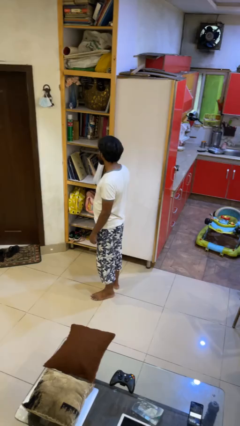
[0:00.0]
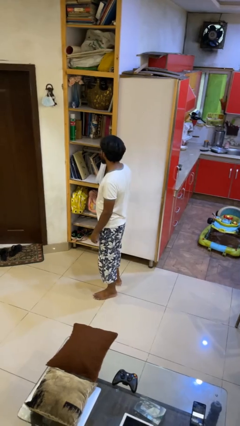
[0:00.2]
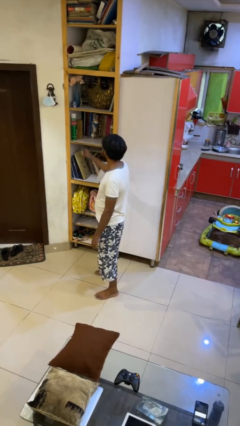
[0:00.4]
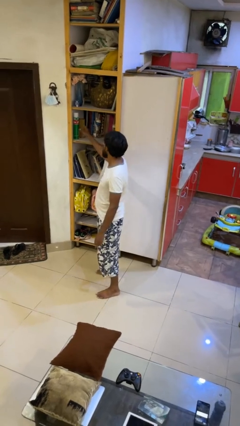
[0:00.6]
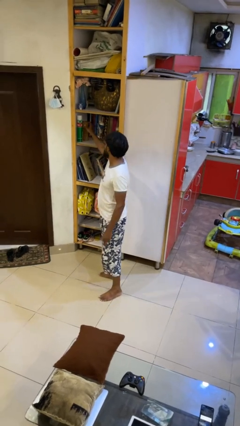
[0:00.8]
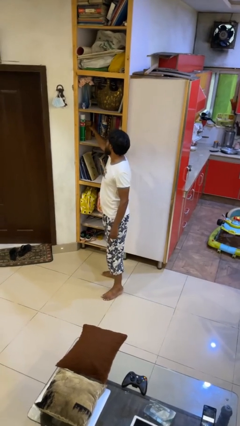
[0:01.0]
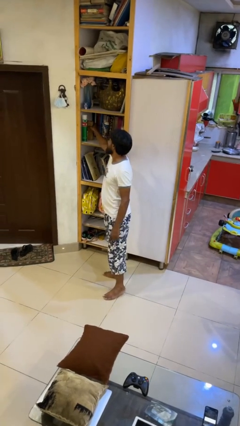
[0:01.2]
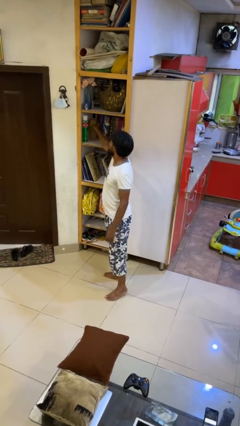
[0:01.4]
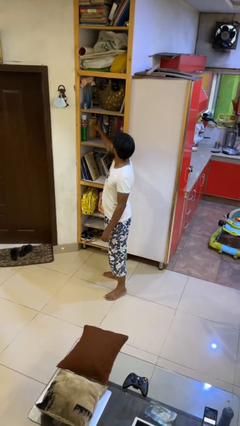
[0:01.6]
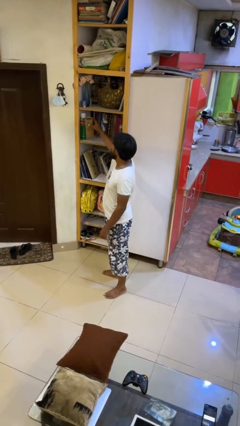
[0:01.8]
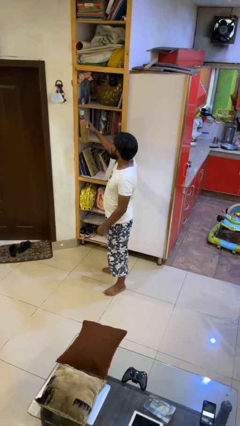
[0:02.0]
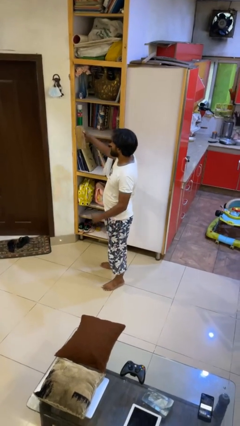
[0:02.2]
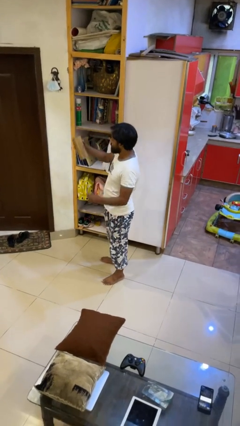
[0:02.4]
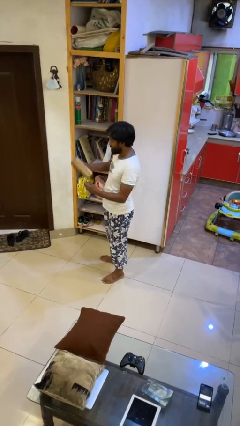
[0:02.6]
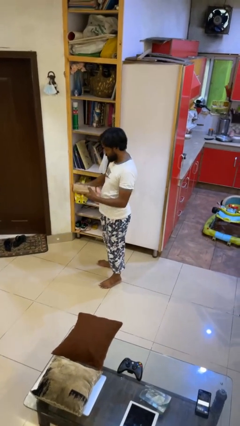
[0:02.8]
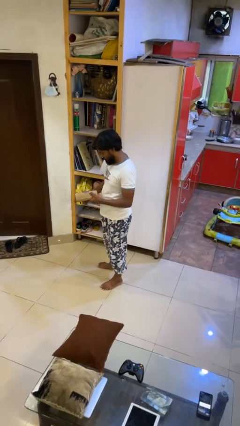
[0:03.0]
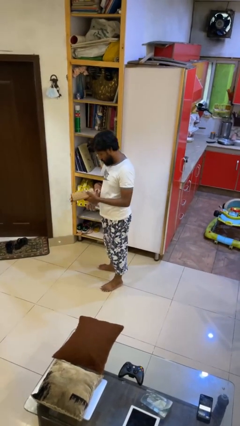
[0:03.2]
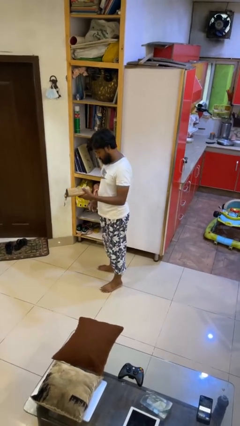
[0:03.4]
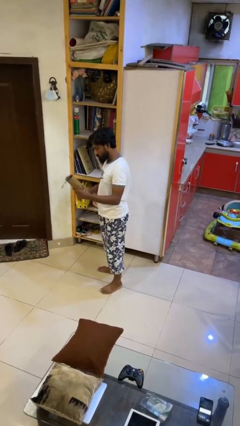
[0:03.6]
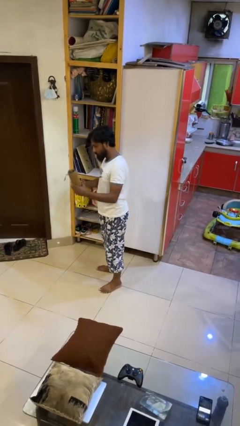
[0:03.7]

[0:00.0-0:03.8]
person picks up object from cabinet

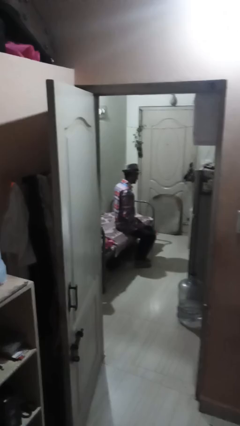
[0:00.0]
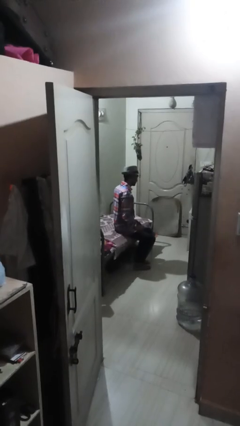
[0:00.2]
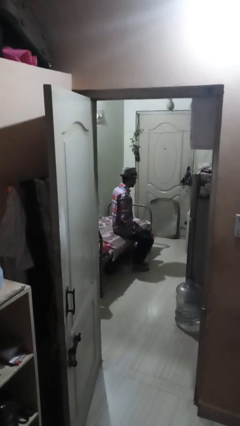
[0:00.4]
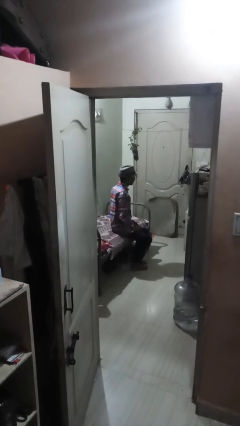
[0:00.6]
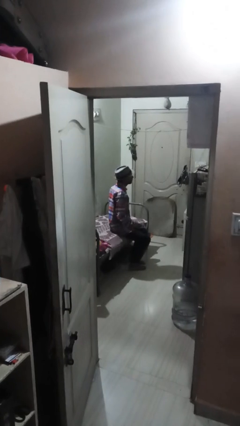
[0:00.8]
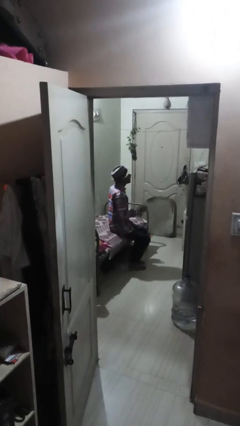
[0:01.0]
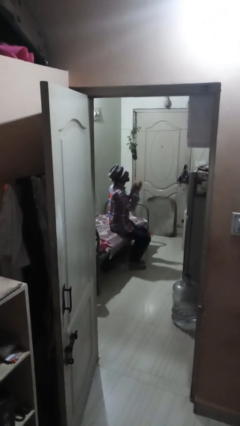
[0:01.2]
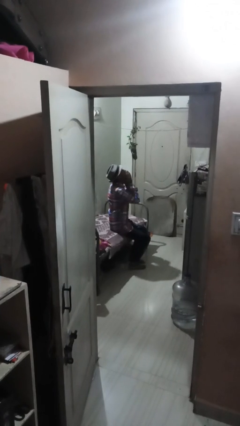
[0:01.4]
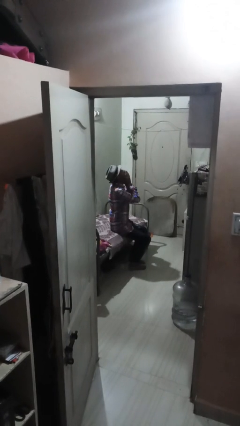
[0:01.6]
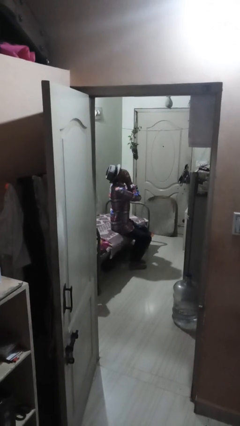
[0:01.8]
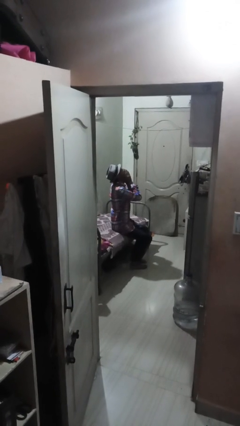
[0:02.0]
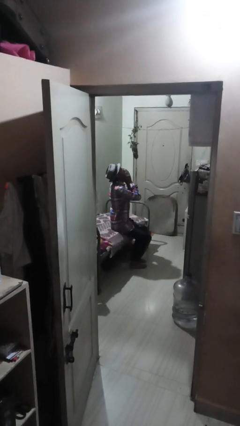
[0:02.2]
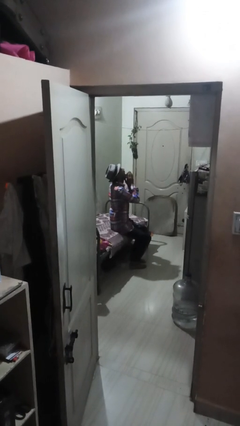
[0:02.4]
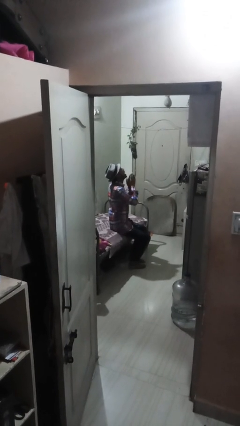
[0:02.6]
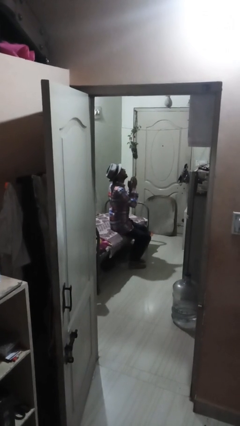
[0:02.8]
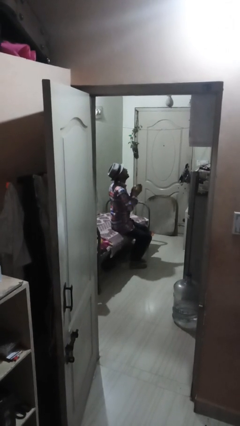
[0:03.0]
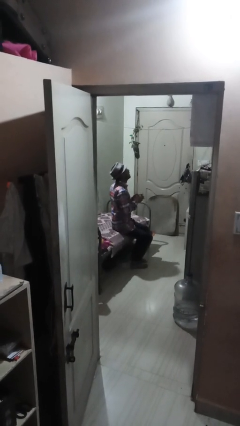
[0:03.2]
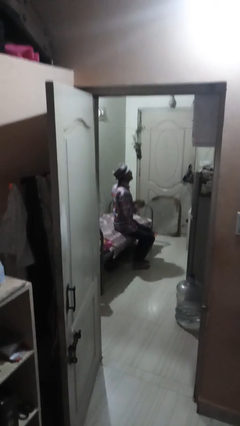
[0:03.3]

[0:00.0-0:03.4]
person yawns

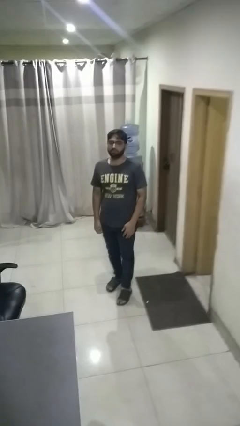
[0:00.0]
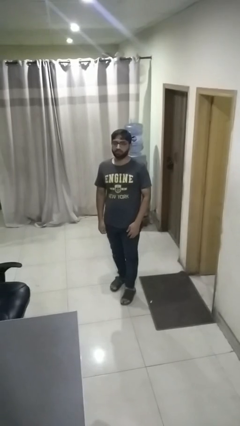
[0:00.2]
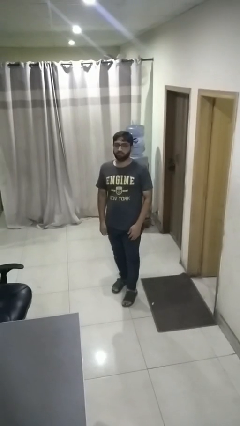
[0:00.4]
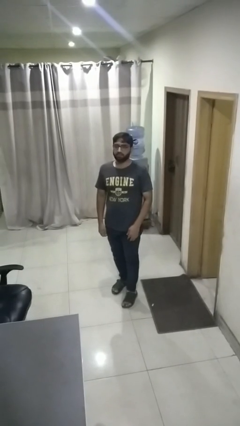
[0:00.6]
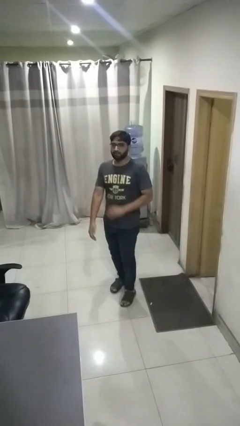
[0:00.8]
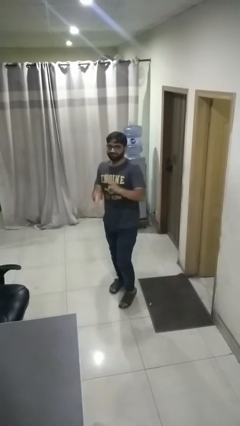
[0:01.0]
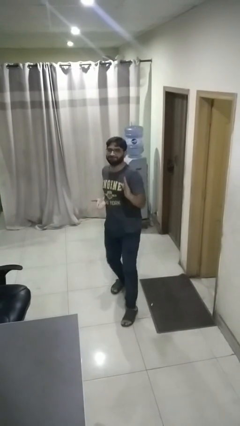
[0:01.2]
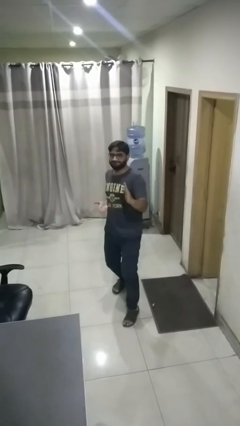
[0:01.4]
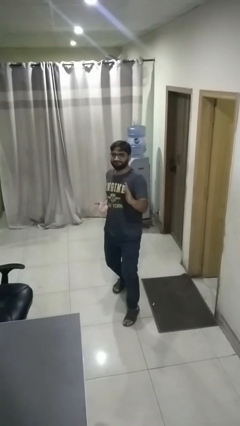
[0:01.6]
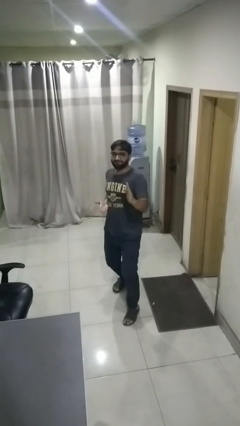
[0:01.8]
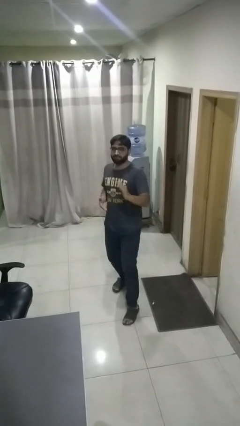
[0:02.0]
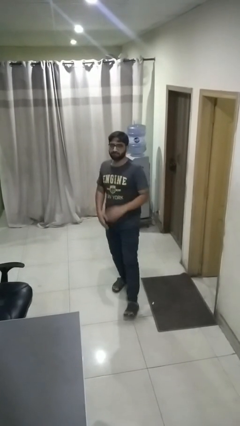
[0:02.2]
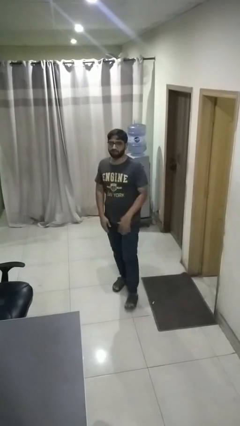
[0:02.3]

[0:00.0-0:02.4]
person karate chop

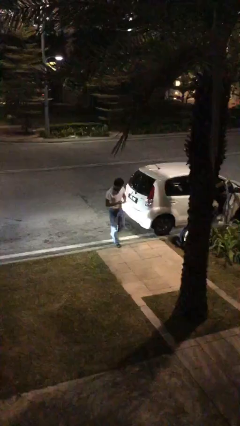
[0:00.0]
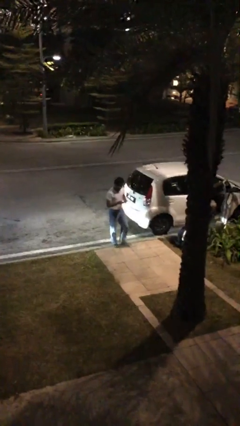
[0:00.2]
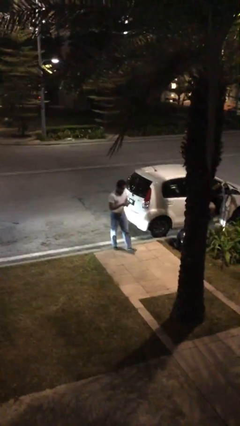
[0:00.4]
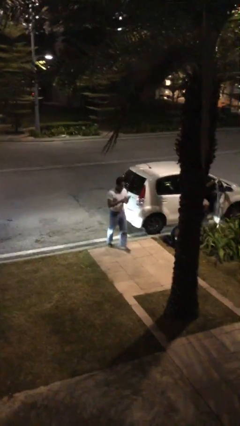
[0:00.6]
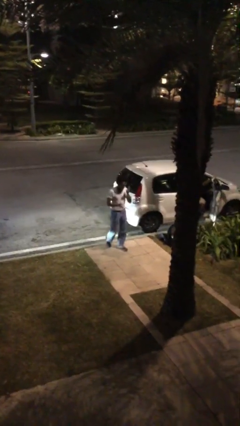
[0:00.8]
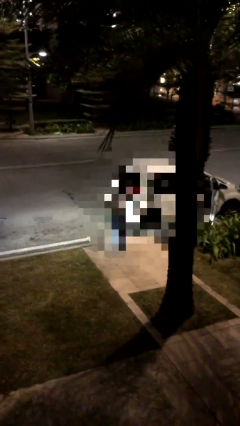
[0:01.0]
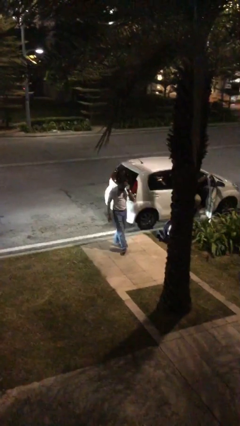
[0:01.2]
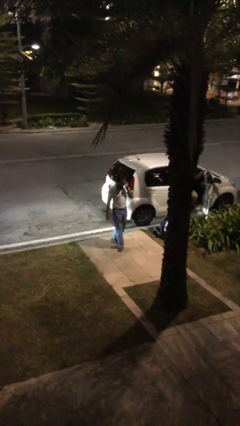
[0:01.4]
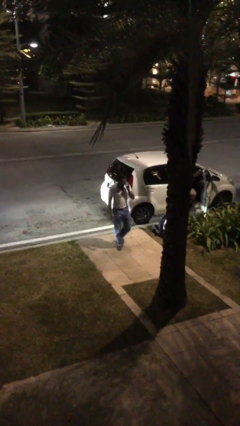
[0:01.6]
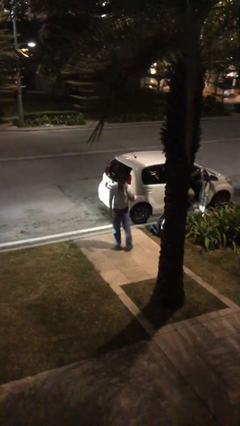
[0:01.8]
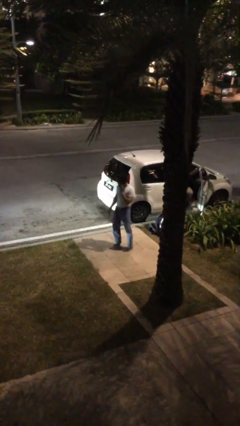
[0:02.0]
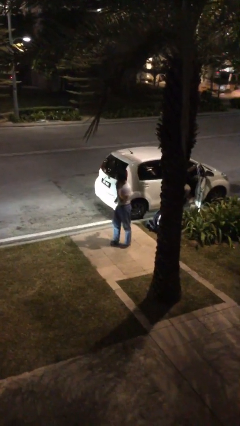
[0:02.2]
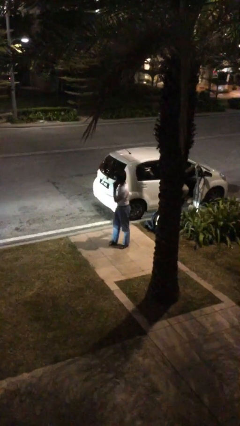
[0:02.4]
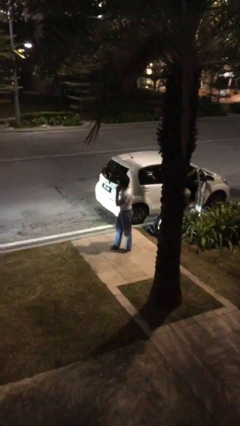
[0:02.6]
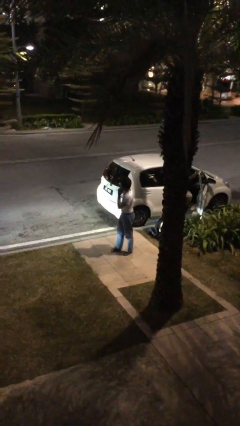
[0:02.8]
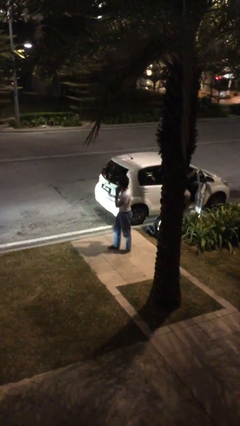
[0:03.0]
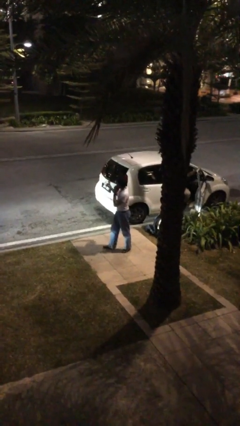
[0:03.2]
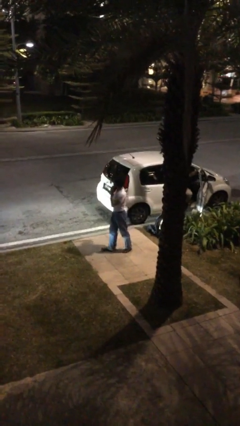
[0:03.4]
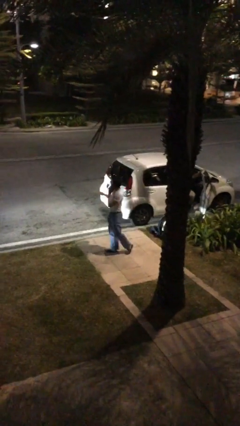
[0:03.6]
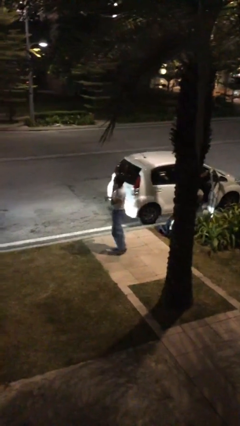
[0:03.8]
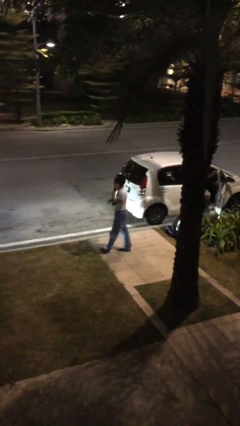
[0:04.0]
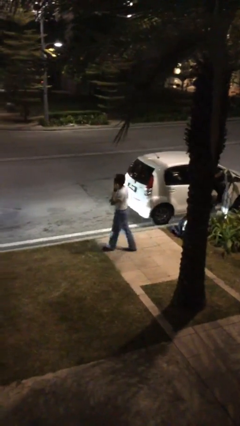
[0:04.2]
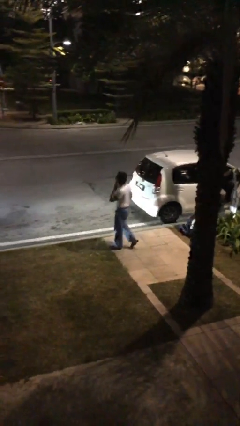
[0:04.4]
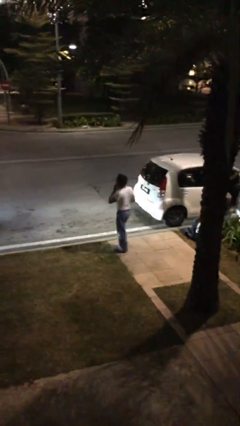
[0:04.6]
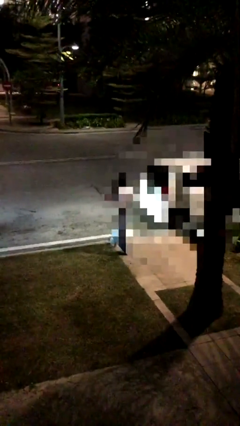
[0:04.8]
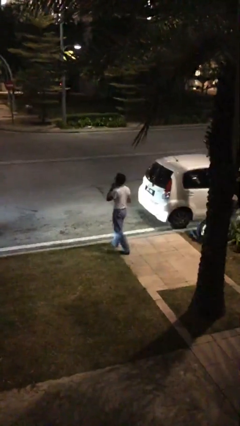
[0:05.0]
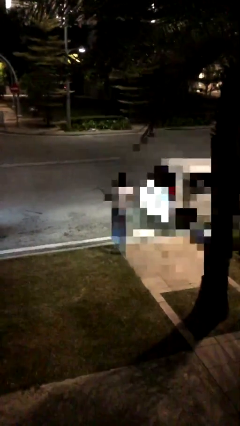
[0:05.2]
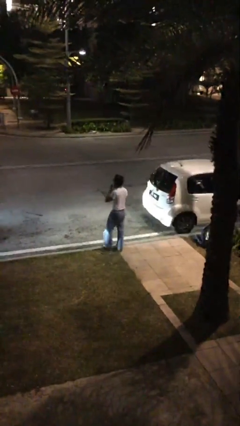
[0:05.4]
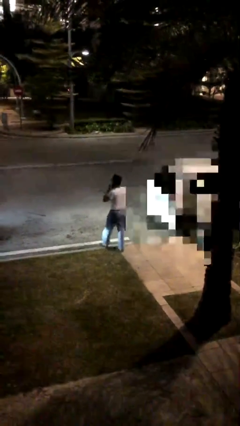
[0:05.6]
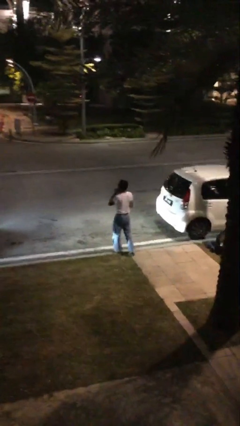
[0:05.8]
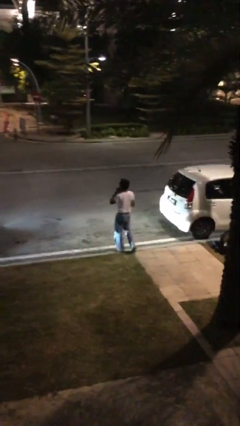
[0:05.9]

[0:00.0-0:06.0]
person talks on phone

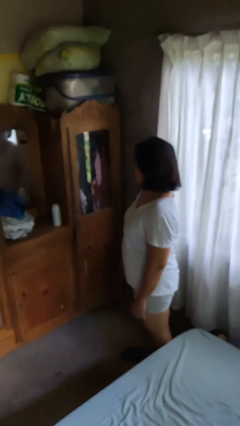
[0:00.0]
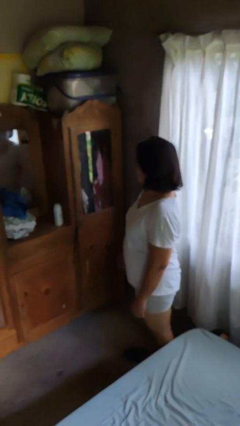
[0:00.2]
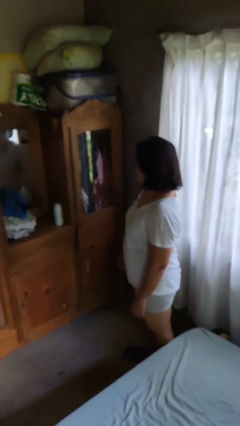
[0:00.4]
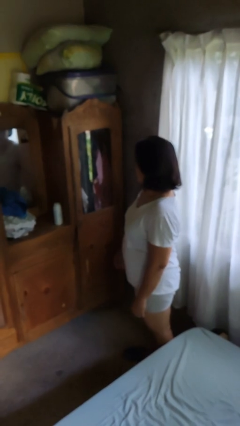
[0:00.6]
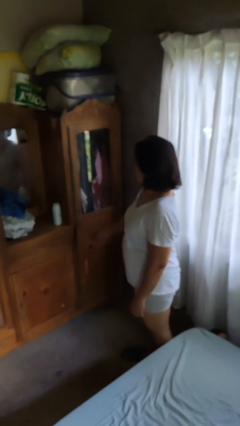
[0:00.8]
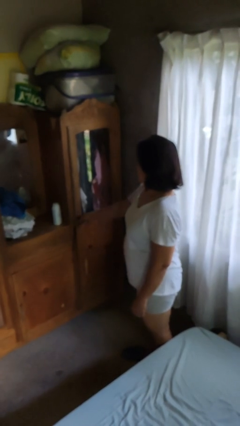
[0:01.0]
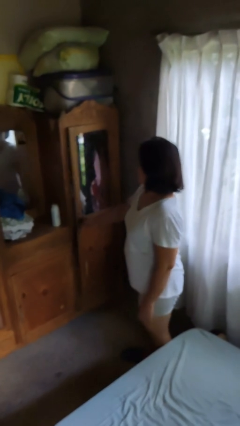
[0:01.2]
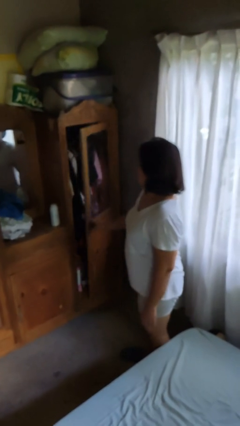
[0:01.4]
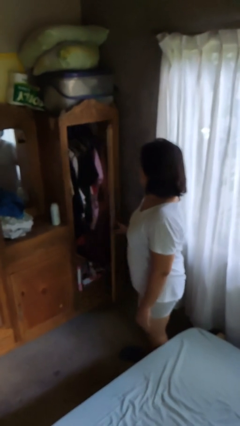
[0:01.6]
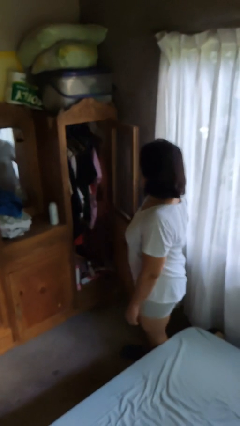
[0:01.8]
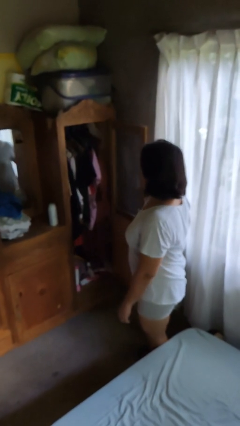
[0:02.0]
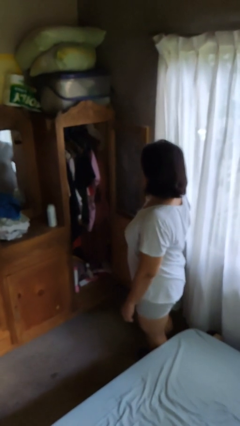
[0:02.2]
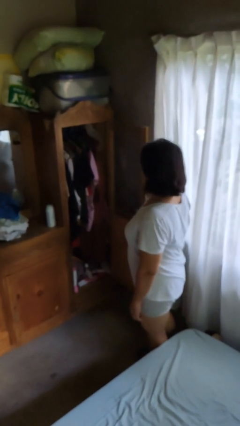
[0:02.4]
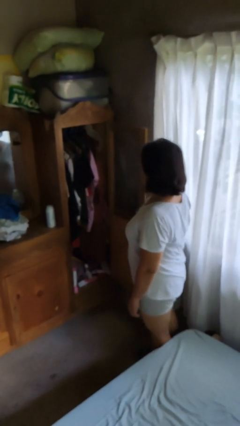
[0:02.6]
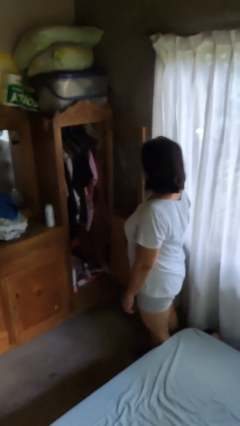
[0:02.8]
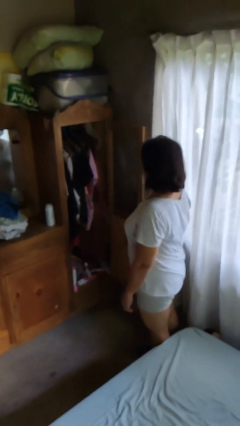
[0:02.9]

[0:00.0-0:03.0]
person opens dresser drawer
